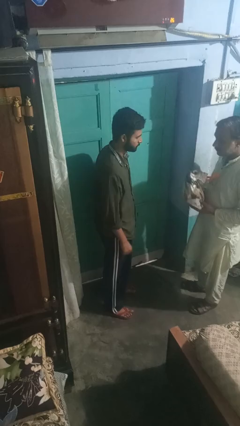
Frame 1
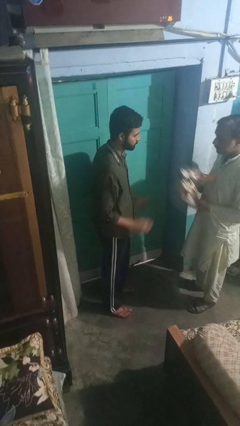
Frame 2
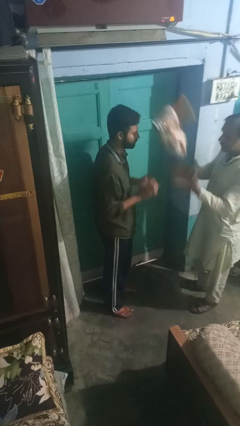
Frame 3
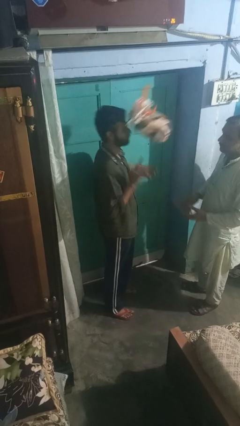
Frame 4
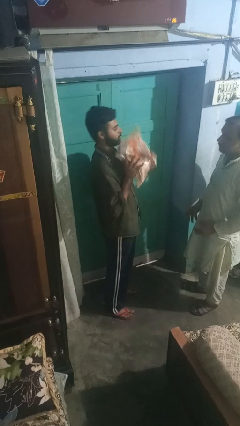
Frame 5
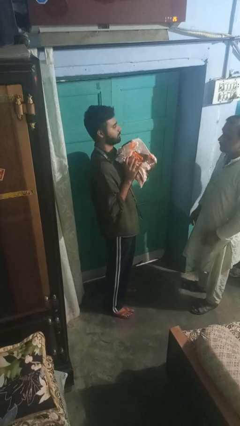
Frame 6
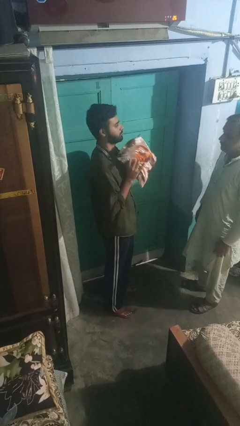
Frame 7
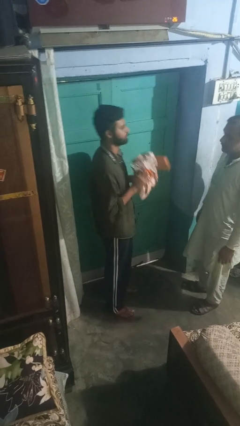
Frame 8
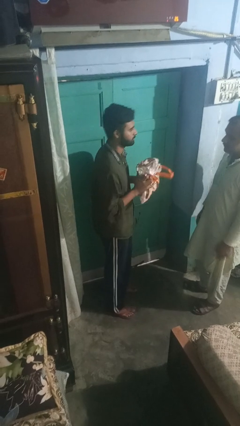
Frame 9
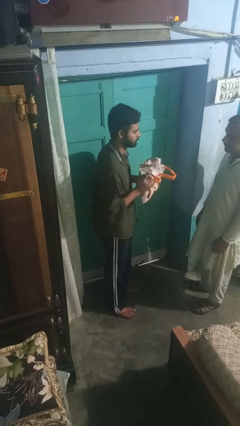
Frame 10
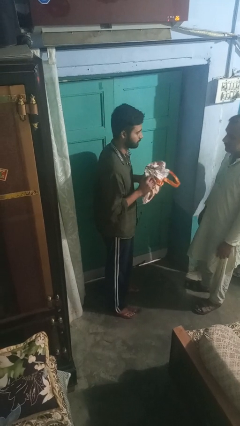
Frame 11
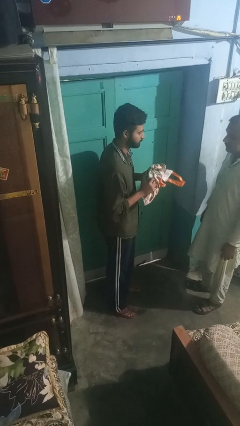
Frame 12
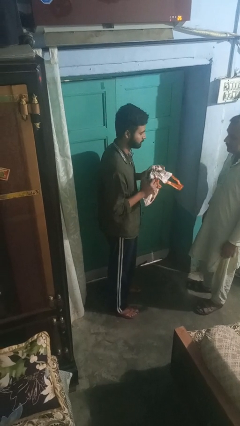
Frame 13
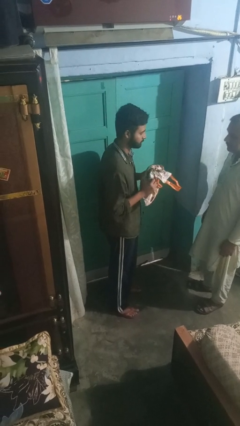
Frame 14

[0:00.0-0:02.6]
person catches object from person

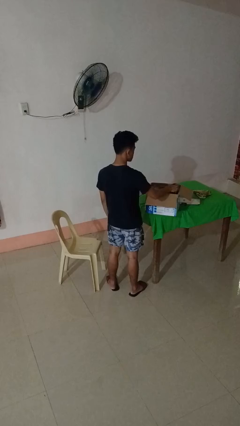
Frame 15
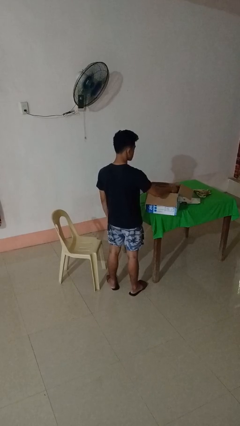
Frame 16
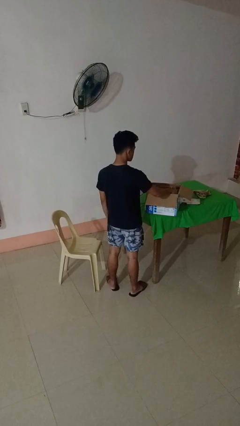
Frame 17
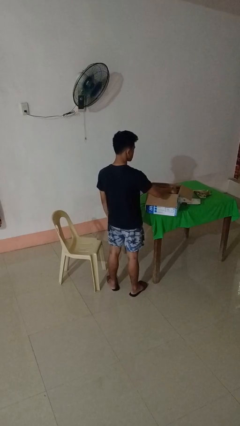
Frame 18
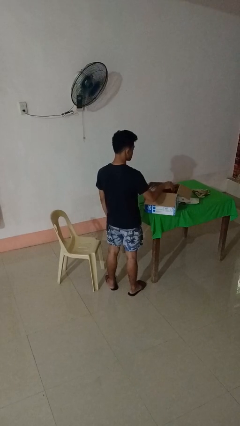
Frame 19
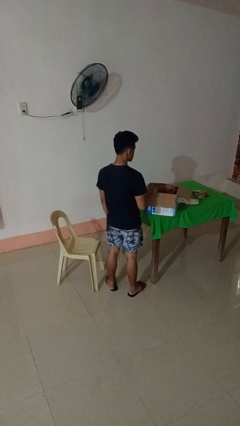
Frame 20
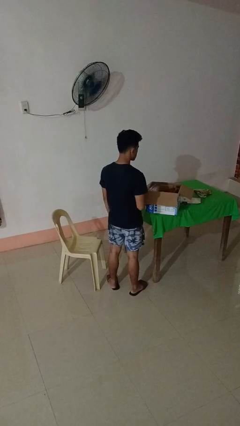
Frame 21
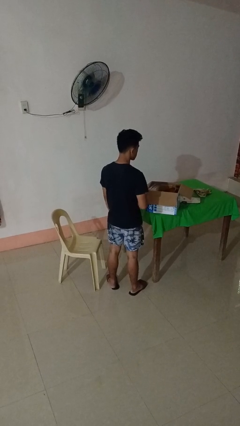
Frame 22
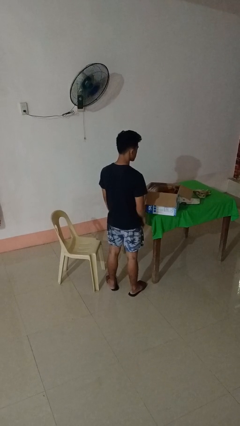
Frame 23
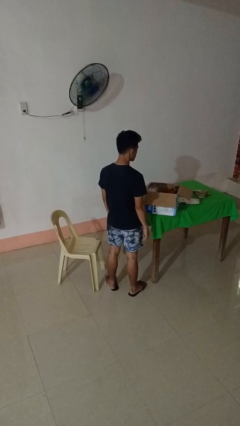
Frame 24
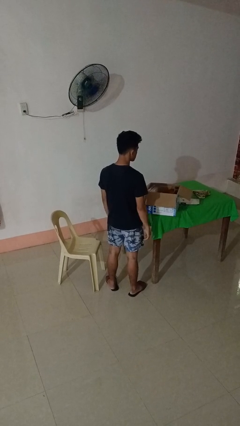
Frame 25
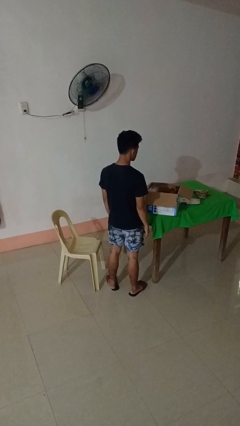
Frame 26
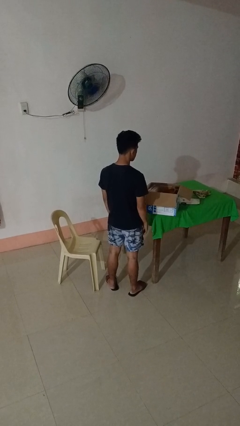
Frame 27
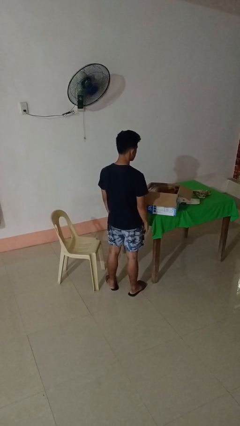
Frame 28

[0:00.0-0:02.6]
person puts object into box

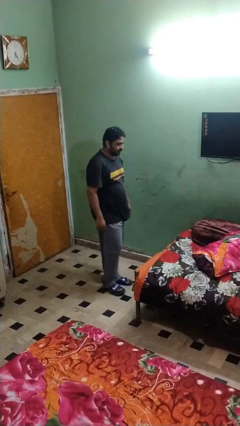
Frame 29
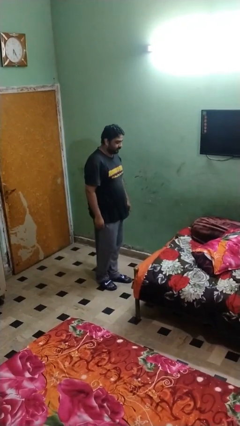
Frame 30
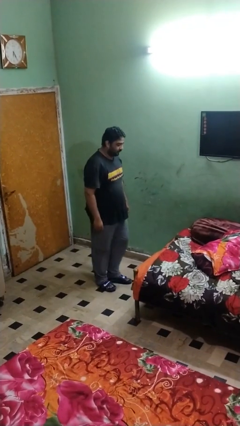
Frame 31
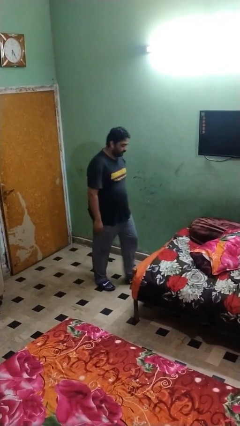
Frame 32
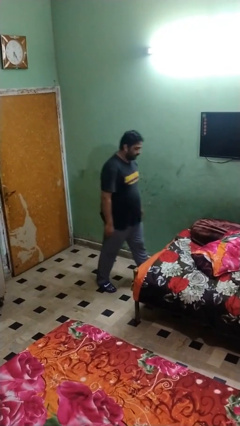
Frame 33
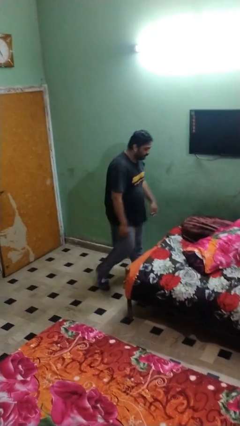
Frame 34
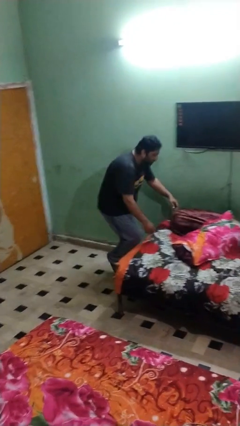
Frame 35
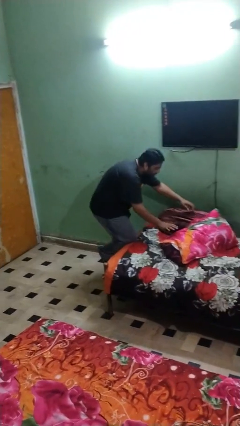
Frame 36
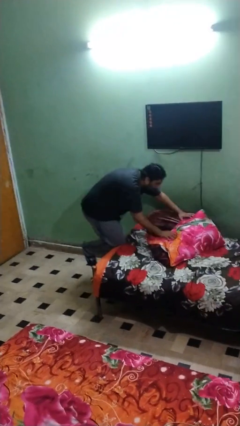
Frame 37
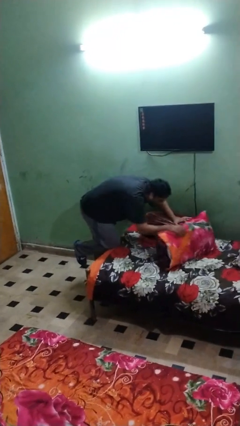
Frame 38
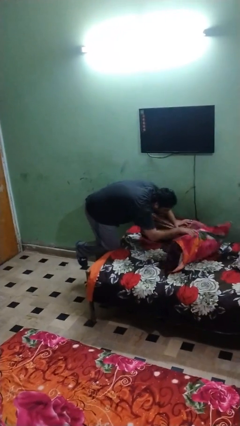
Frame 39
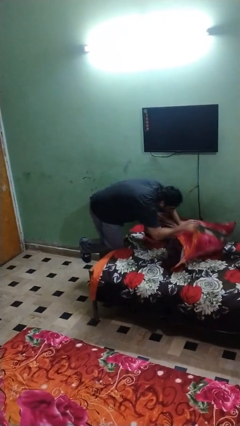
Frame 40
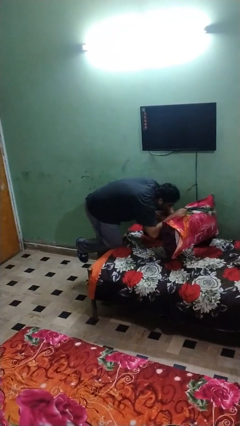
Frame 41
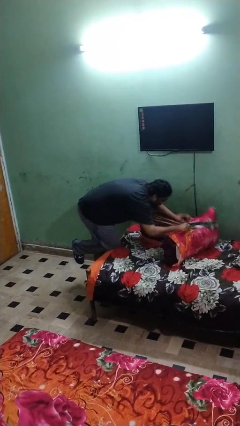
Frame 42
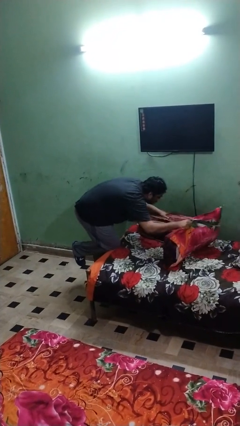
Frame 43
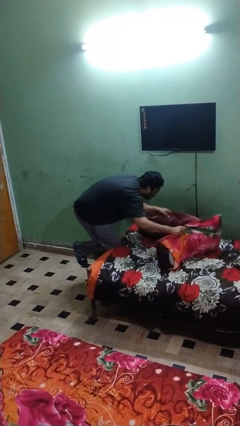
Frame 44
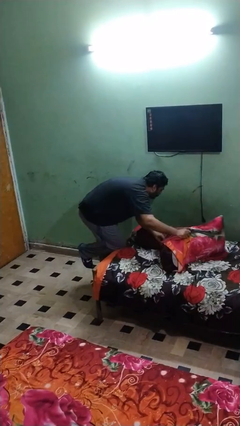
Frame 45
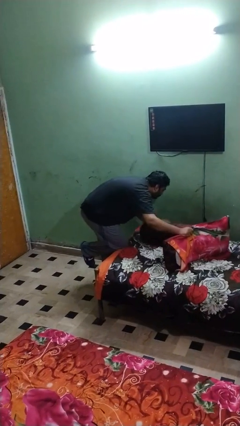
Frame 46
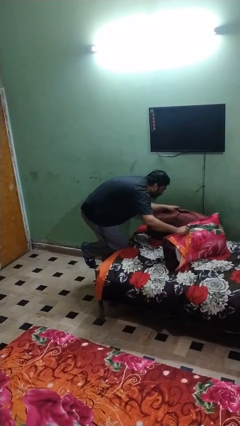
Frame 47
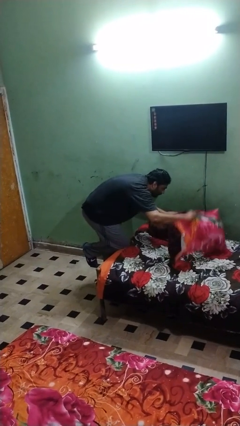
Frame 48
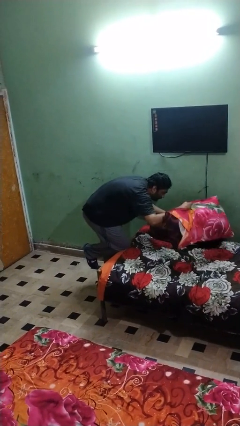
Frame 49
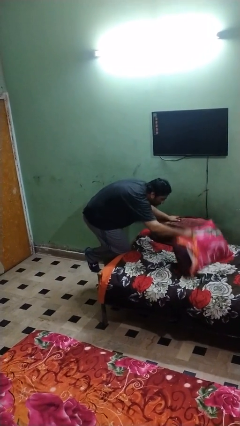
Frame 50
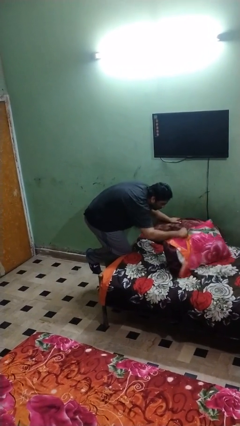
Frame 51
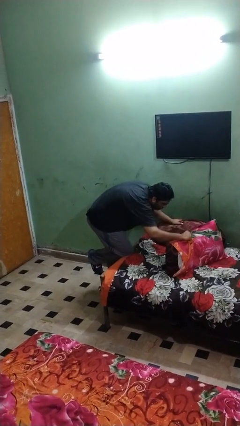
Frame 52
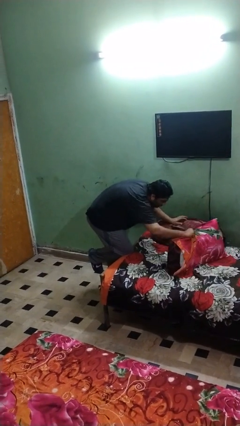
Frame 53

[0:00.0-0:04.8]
person searches in couch

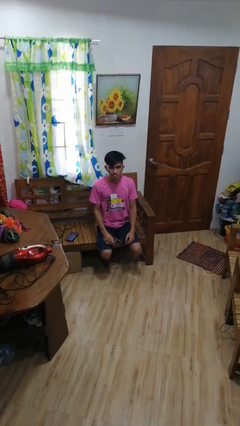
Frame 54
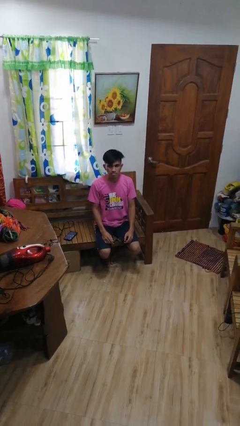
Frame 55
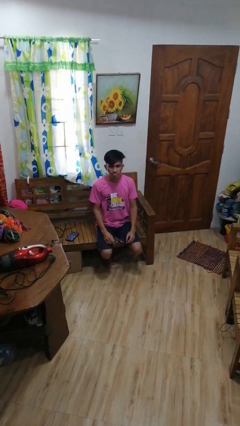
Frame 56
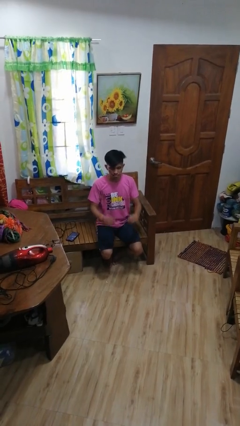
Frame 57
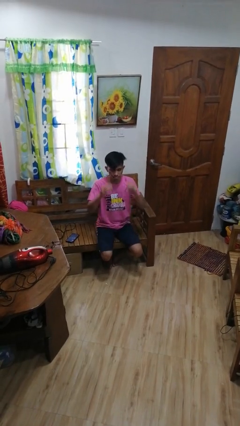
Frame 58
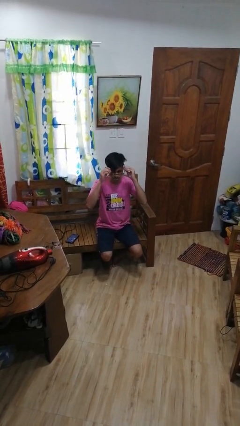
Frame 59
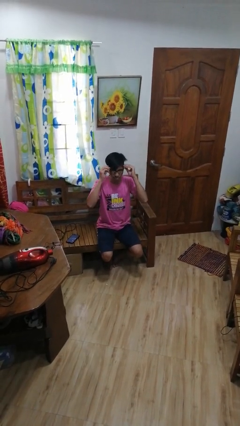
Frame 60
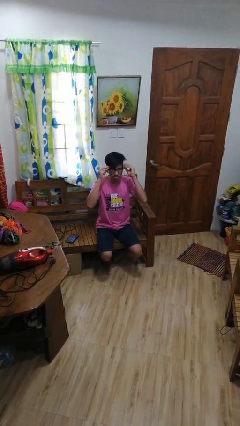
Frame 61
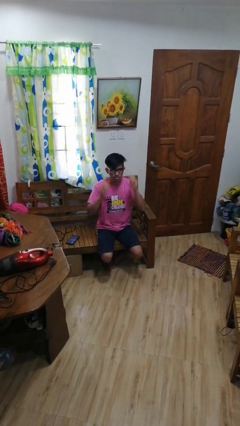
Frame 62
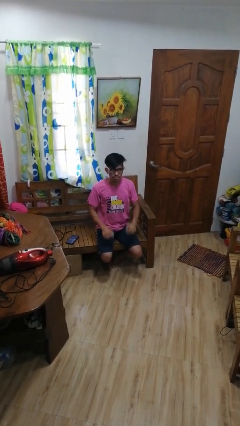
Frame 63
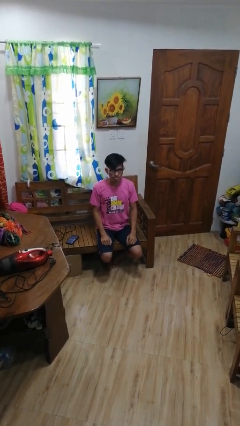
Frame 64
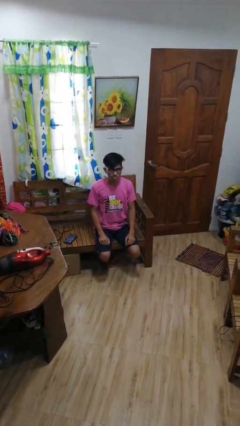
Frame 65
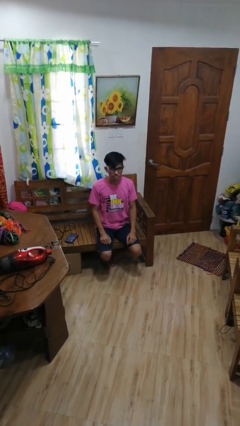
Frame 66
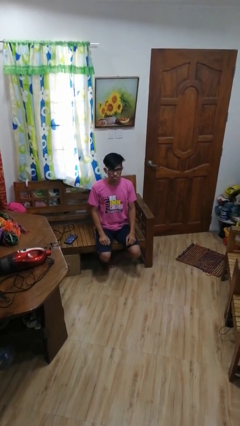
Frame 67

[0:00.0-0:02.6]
person puts on glasses

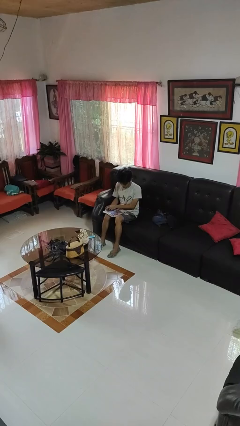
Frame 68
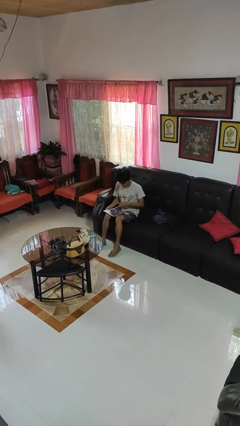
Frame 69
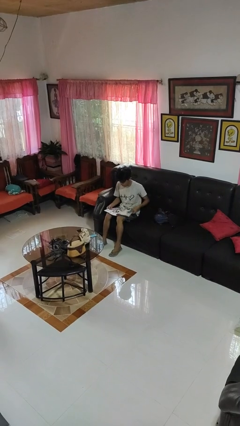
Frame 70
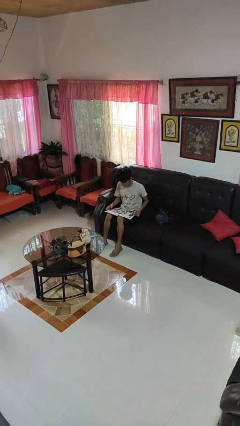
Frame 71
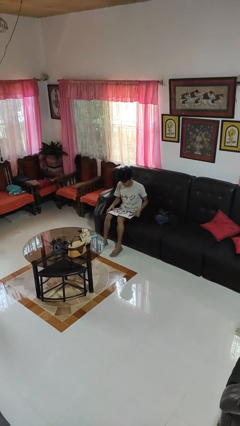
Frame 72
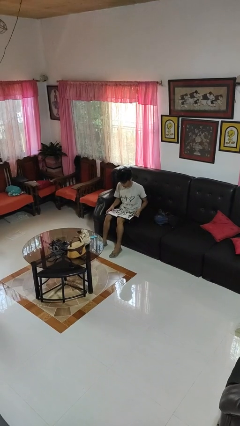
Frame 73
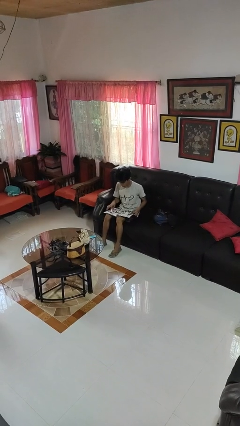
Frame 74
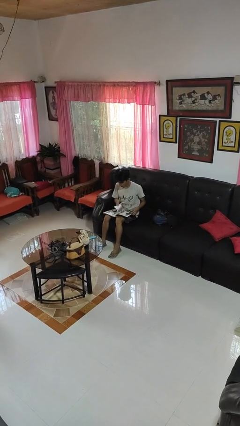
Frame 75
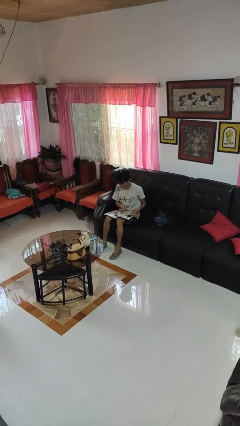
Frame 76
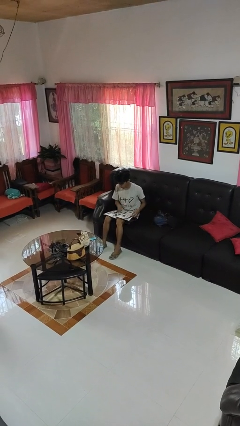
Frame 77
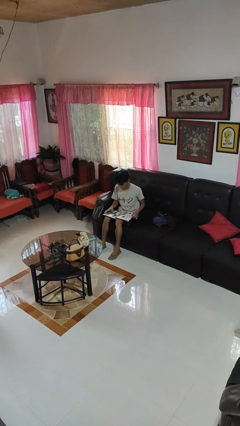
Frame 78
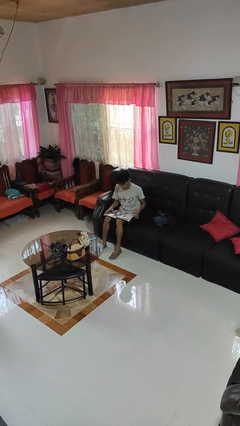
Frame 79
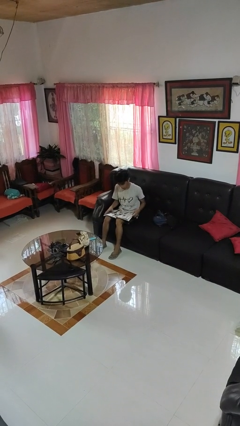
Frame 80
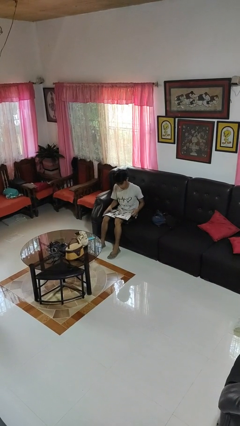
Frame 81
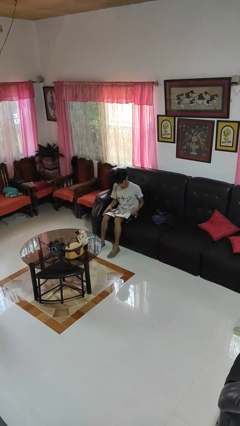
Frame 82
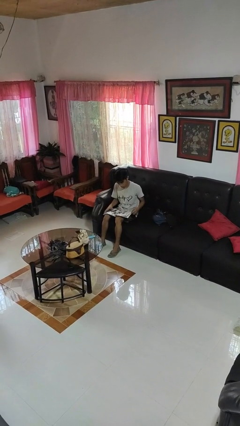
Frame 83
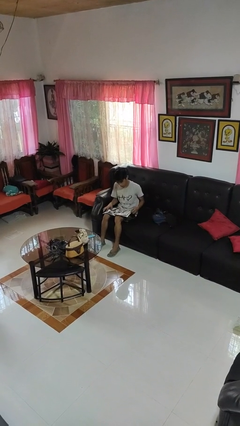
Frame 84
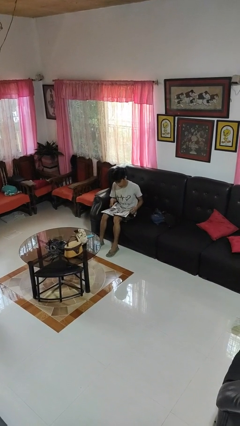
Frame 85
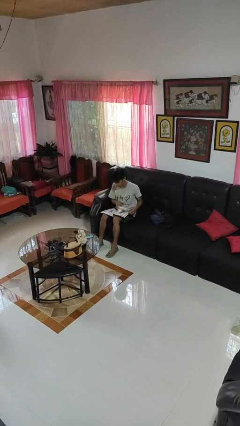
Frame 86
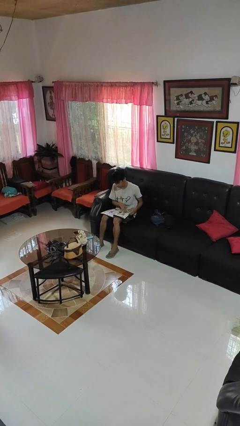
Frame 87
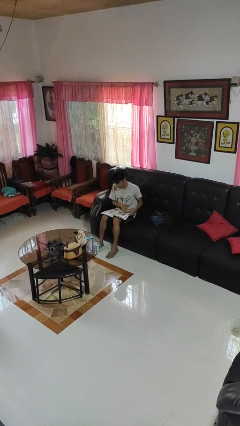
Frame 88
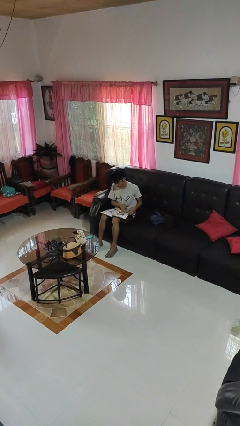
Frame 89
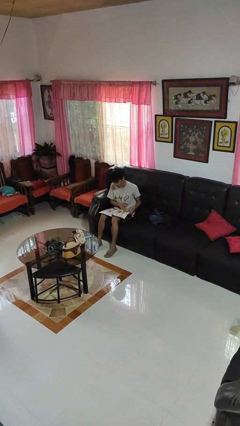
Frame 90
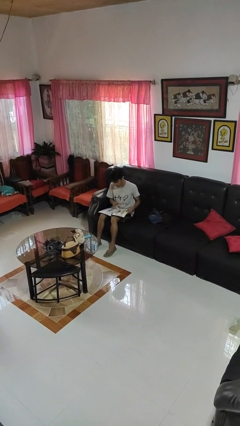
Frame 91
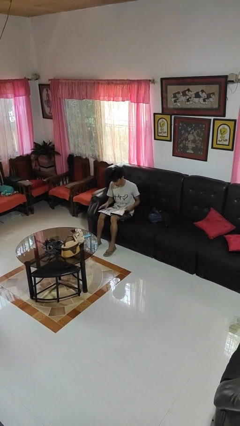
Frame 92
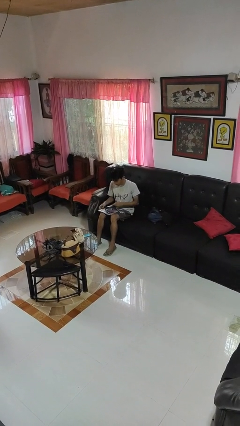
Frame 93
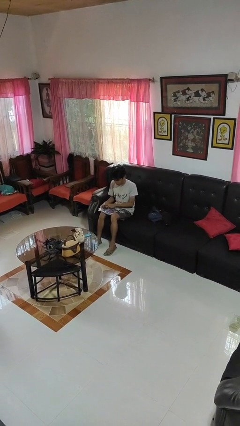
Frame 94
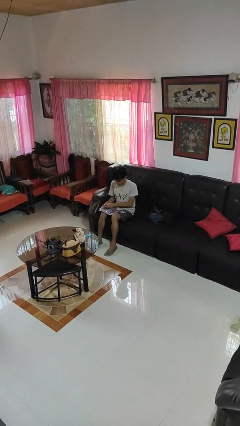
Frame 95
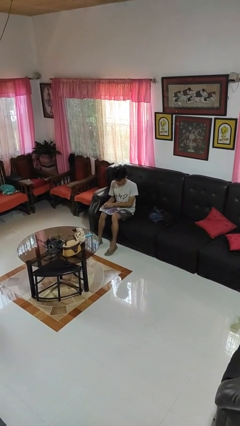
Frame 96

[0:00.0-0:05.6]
person reads magazine
